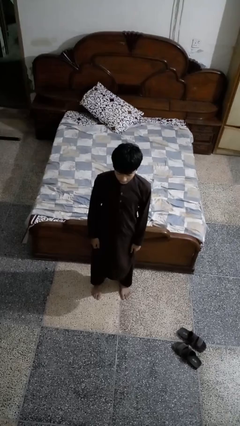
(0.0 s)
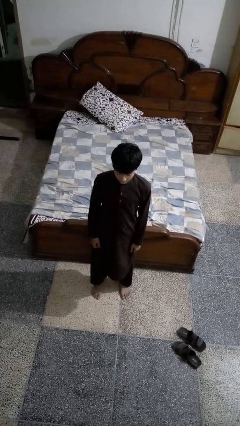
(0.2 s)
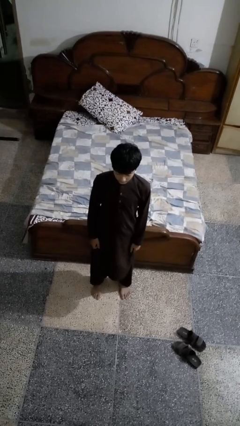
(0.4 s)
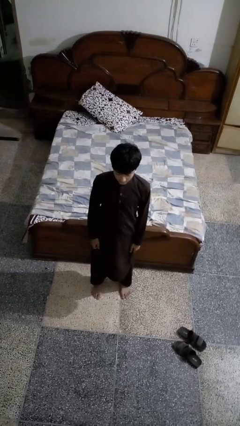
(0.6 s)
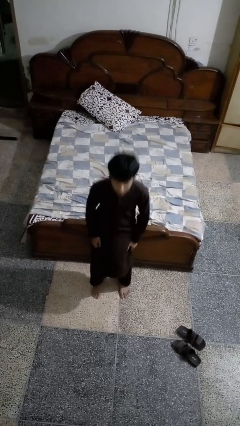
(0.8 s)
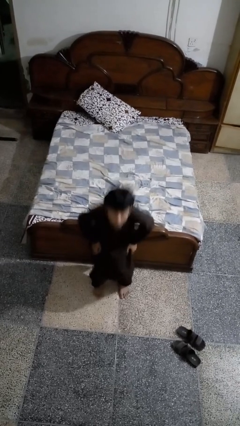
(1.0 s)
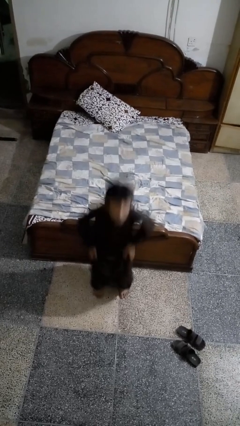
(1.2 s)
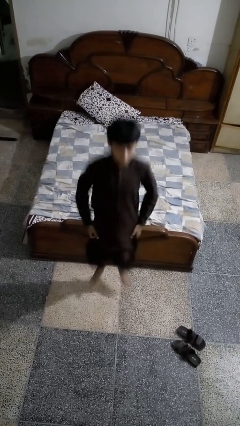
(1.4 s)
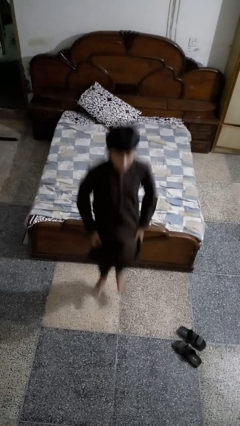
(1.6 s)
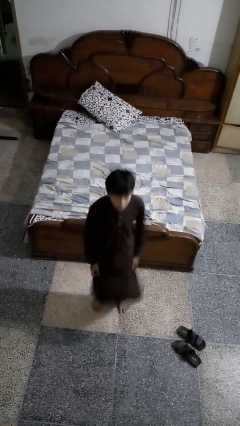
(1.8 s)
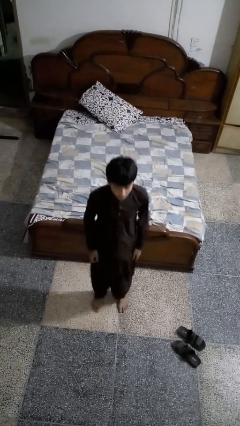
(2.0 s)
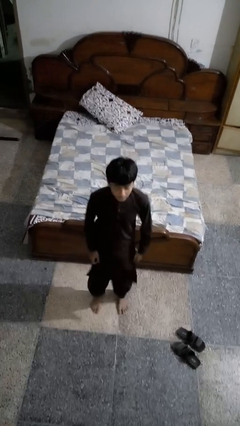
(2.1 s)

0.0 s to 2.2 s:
person jumps

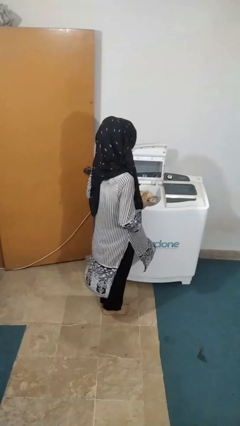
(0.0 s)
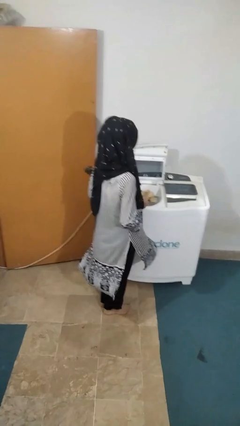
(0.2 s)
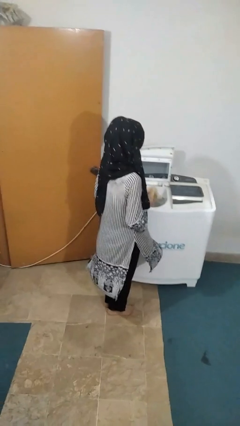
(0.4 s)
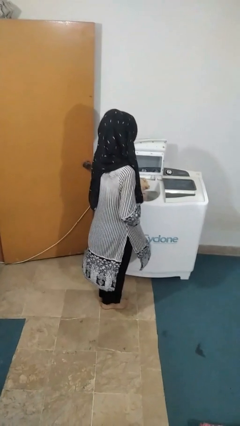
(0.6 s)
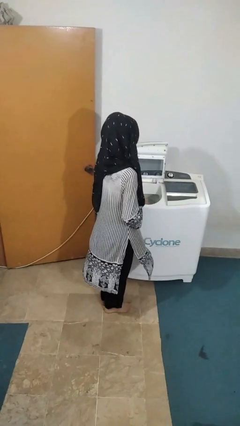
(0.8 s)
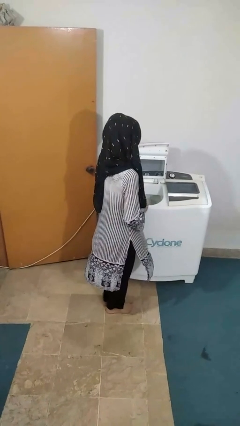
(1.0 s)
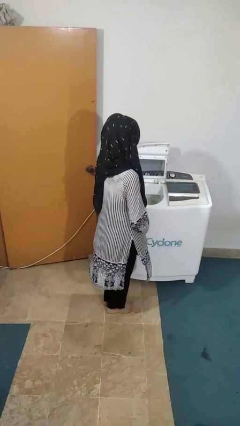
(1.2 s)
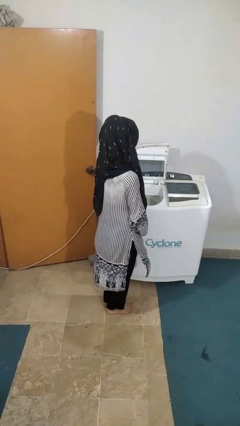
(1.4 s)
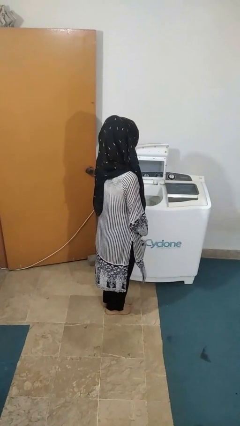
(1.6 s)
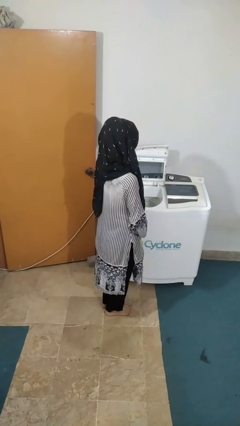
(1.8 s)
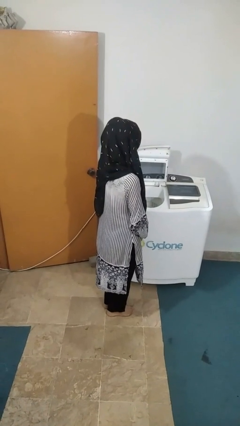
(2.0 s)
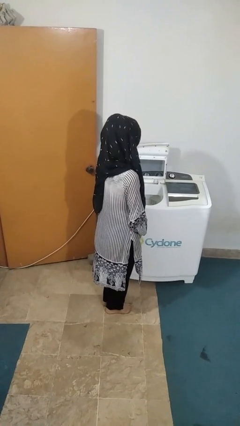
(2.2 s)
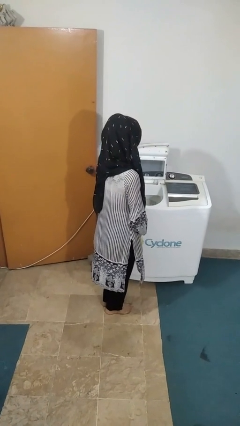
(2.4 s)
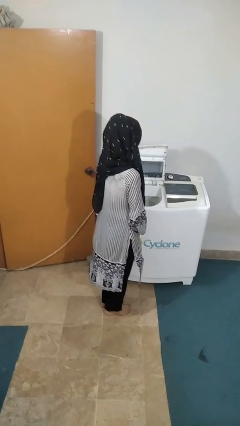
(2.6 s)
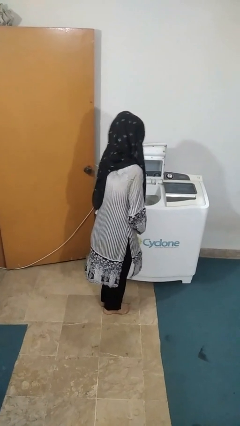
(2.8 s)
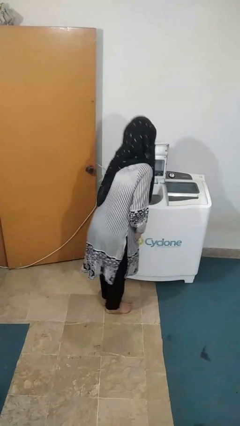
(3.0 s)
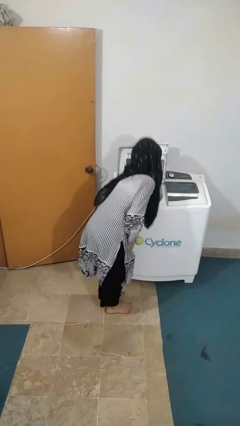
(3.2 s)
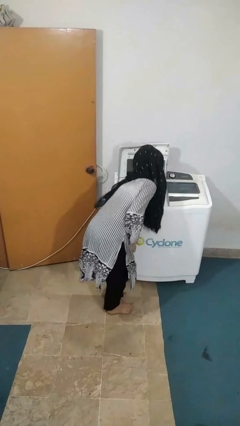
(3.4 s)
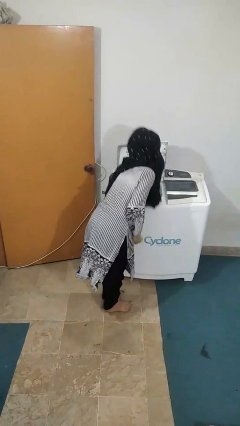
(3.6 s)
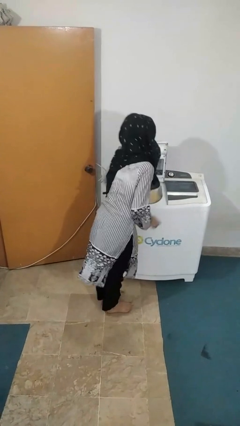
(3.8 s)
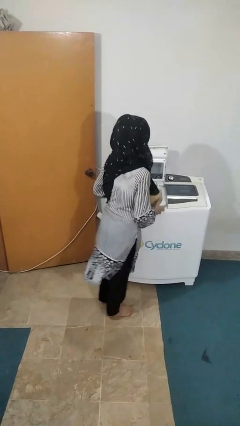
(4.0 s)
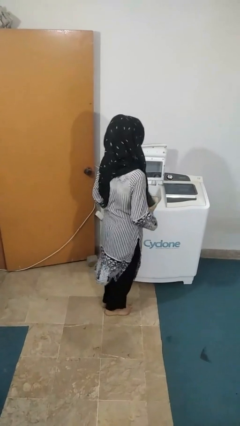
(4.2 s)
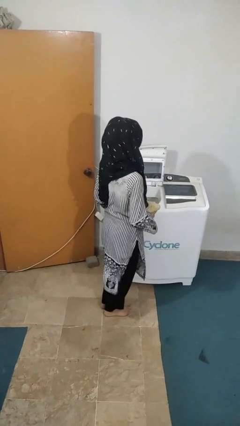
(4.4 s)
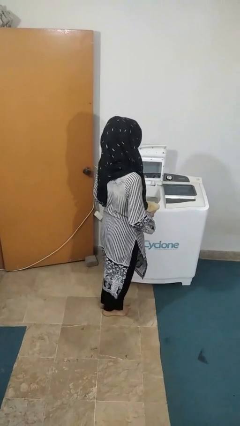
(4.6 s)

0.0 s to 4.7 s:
person unloads clotheswasher

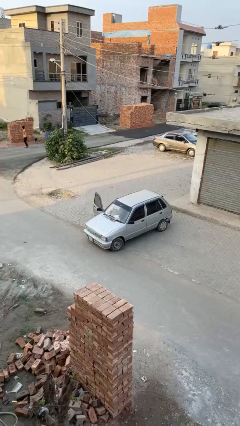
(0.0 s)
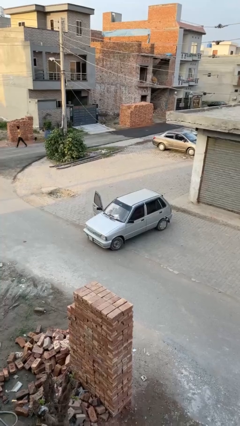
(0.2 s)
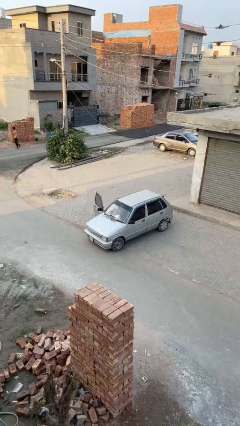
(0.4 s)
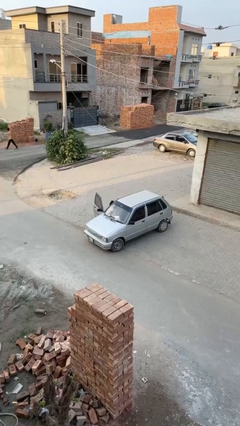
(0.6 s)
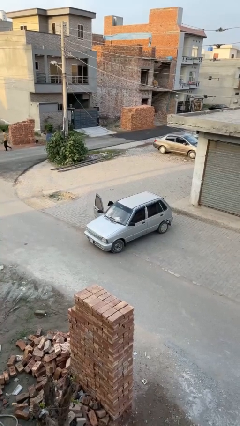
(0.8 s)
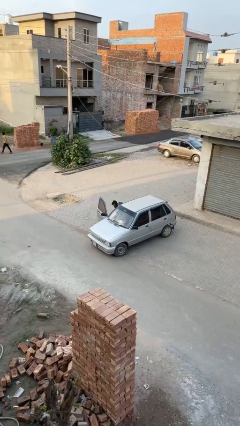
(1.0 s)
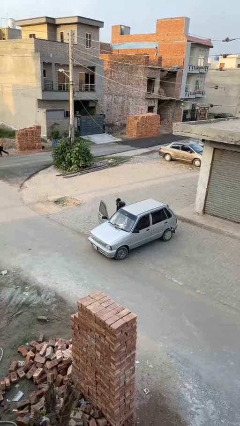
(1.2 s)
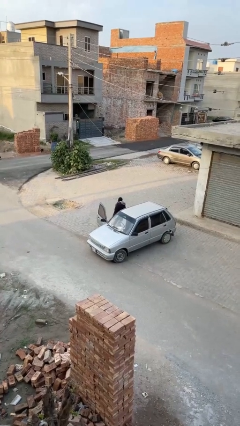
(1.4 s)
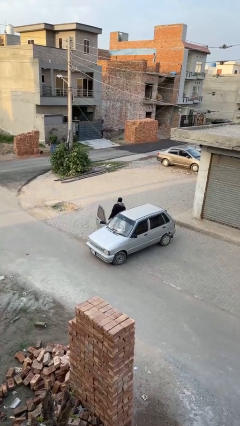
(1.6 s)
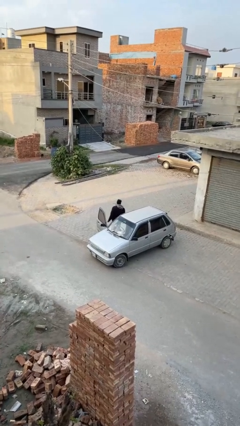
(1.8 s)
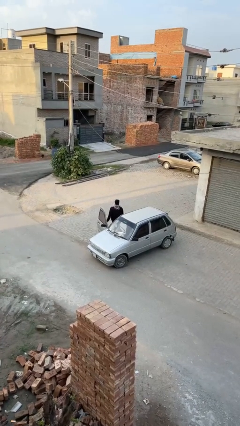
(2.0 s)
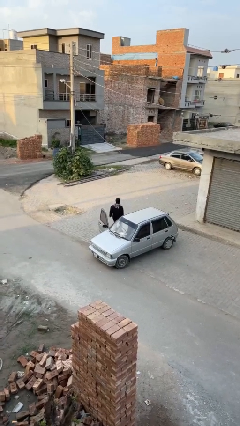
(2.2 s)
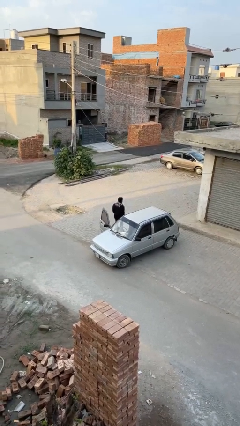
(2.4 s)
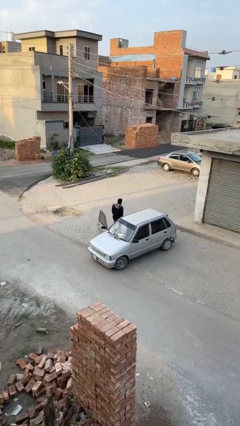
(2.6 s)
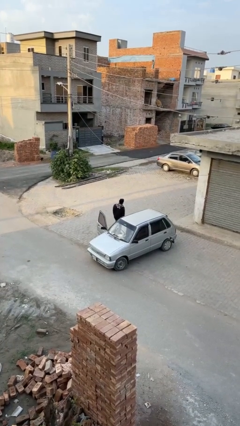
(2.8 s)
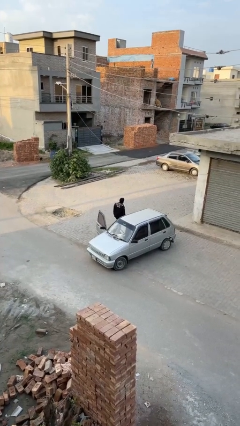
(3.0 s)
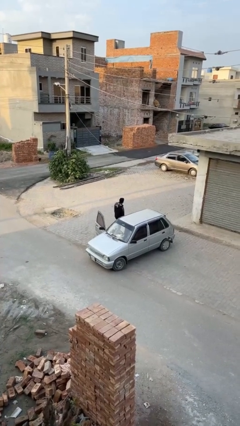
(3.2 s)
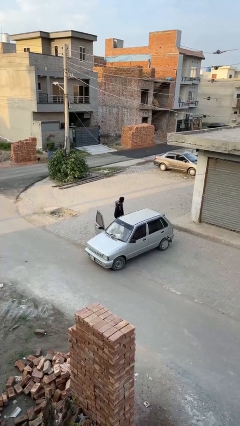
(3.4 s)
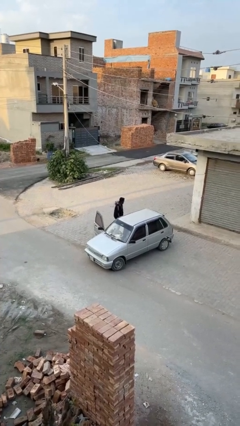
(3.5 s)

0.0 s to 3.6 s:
person exits car

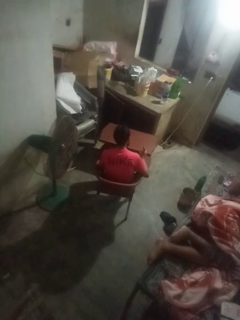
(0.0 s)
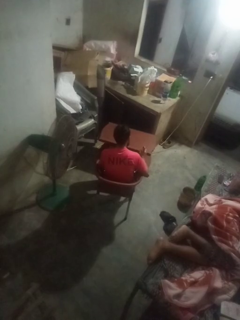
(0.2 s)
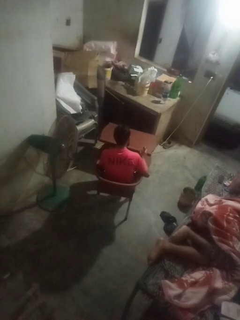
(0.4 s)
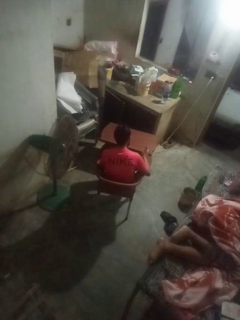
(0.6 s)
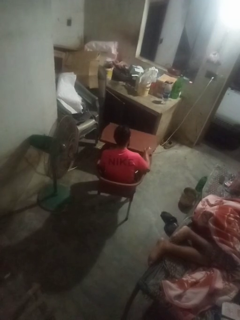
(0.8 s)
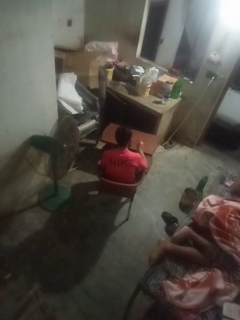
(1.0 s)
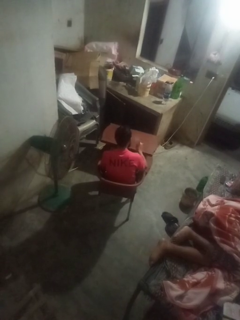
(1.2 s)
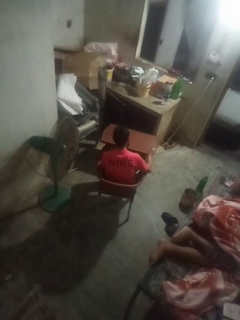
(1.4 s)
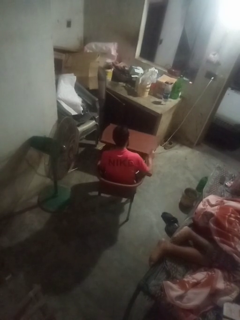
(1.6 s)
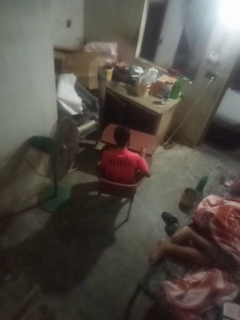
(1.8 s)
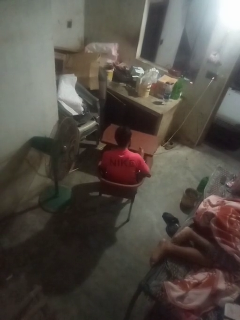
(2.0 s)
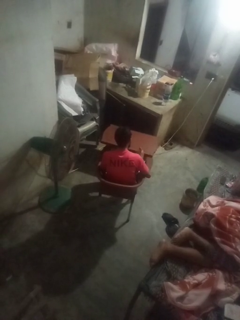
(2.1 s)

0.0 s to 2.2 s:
person sprays from bottle

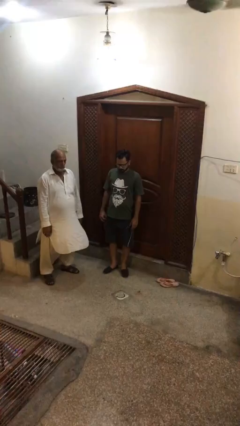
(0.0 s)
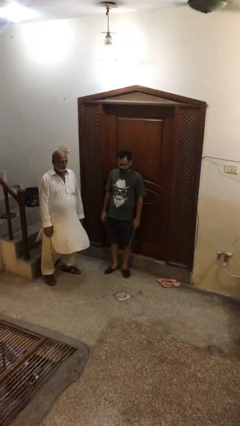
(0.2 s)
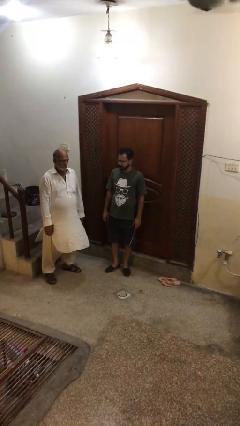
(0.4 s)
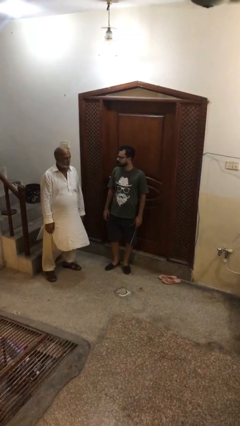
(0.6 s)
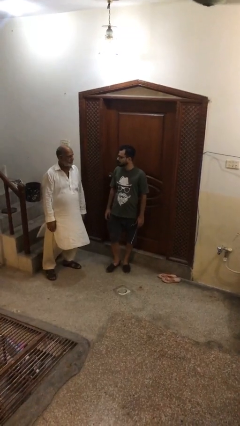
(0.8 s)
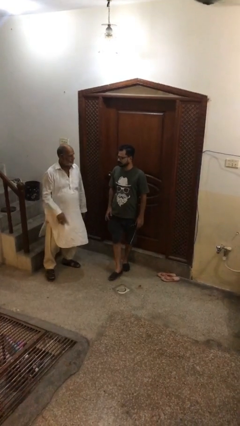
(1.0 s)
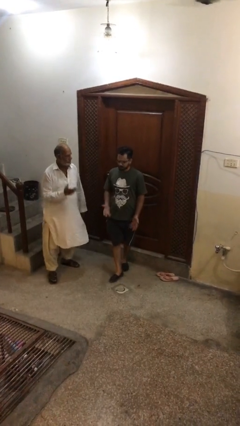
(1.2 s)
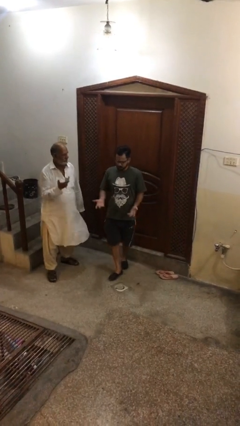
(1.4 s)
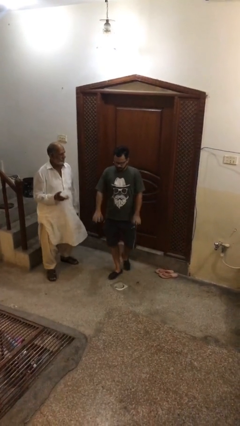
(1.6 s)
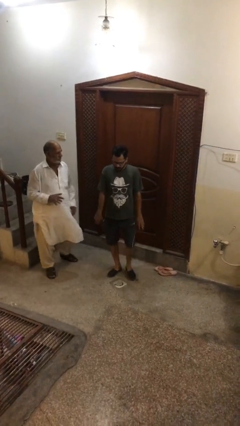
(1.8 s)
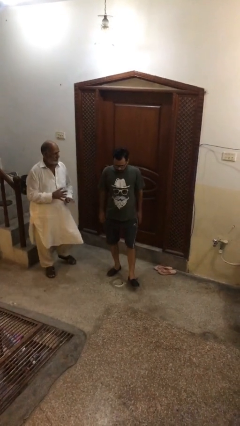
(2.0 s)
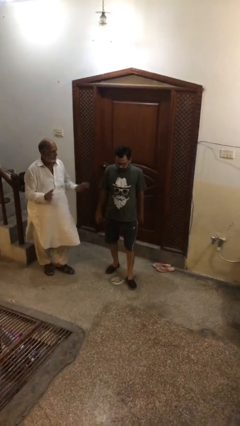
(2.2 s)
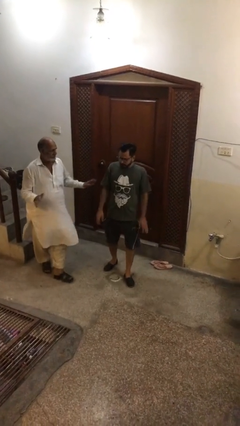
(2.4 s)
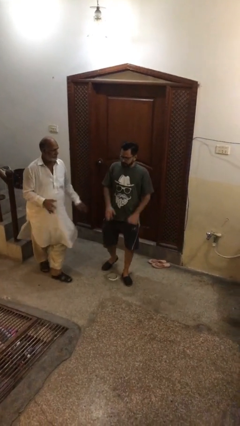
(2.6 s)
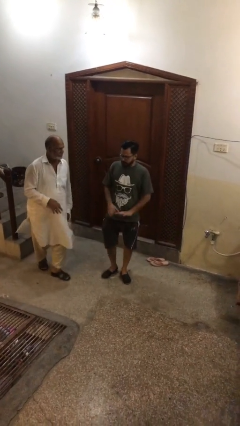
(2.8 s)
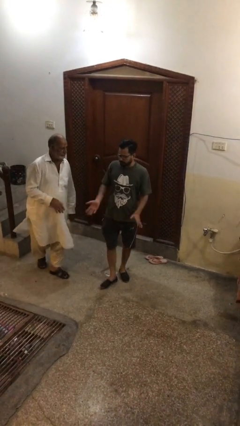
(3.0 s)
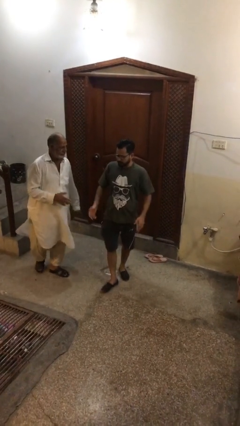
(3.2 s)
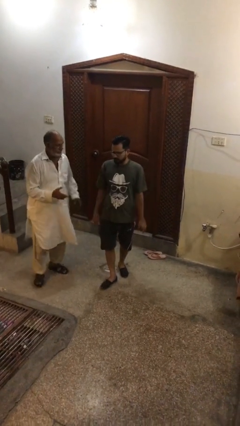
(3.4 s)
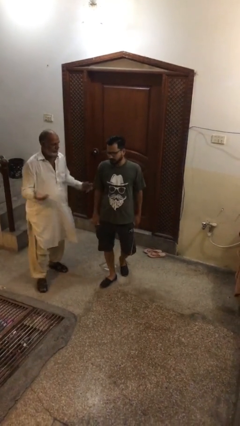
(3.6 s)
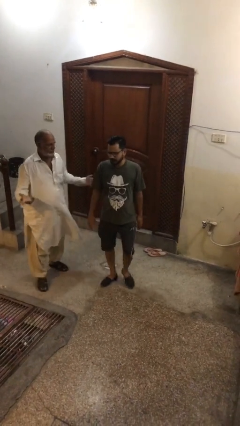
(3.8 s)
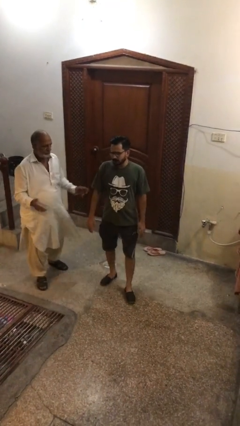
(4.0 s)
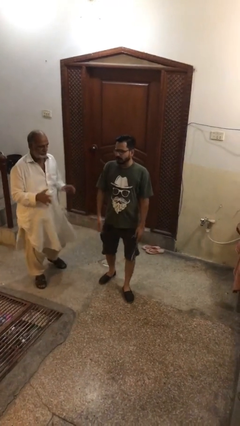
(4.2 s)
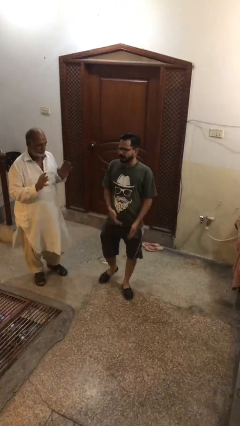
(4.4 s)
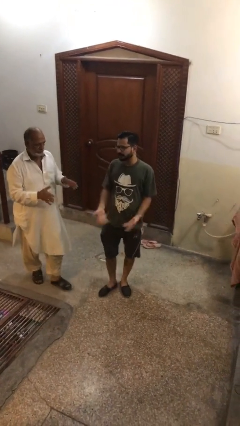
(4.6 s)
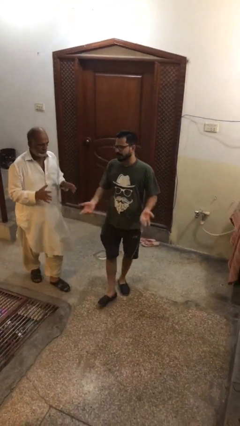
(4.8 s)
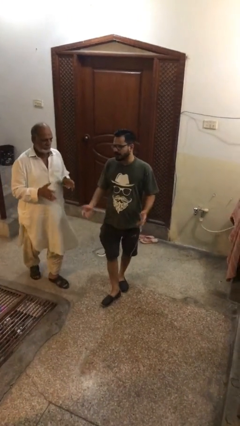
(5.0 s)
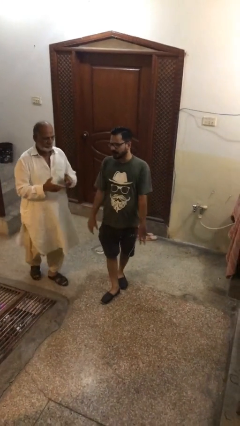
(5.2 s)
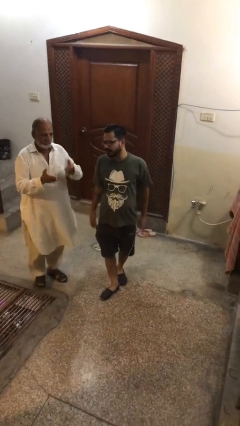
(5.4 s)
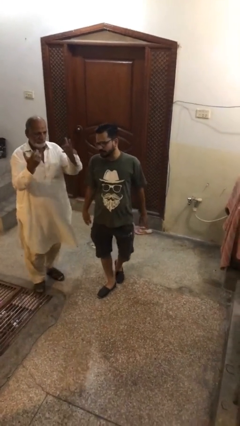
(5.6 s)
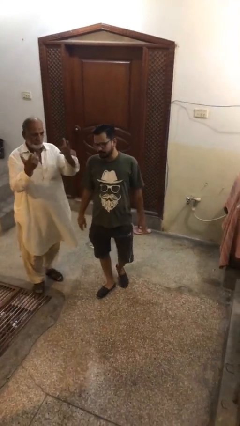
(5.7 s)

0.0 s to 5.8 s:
person talks to person
